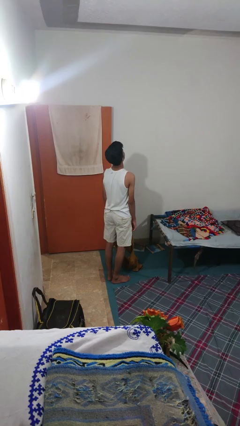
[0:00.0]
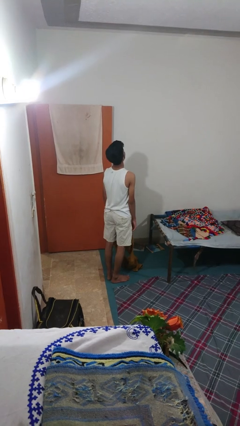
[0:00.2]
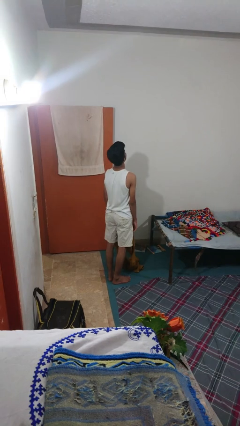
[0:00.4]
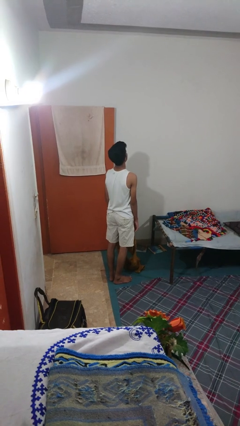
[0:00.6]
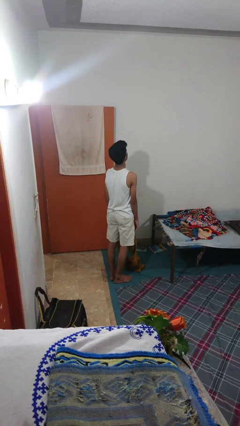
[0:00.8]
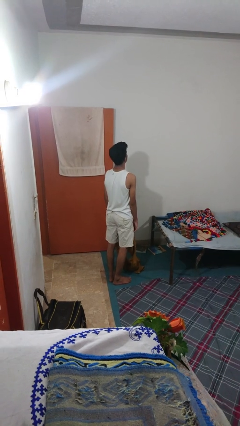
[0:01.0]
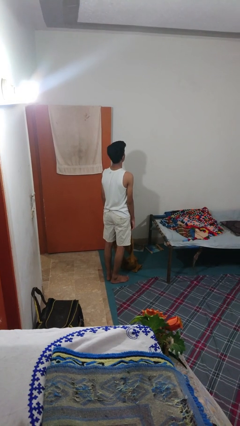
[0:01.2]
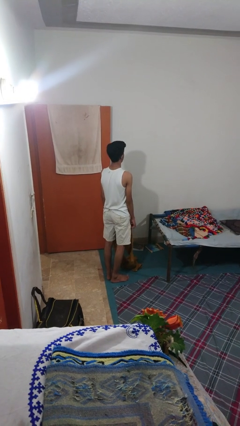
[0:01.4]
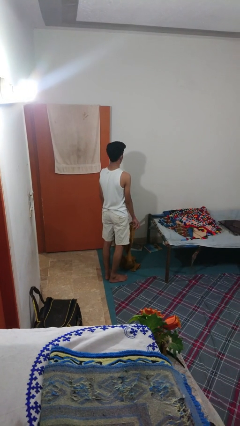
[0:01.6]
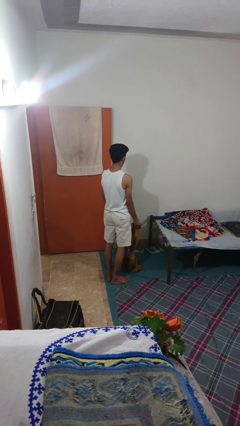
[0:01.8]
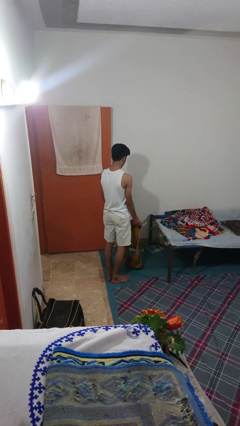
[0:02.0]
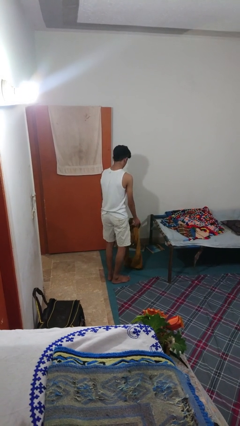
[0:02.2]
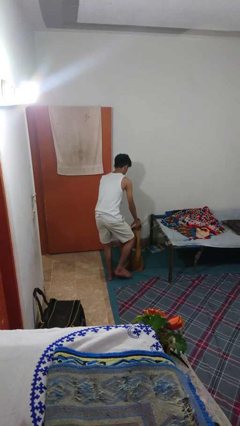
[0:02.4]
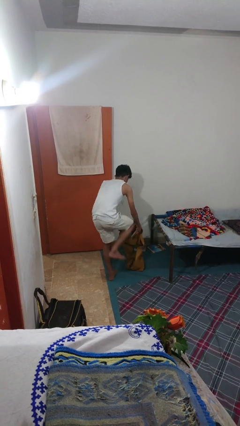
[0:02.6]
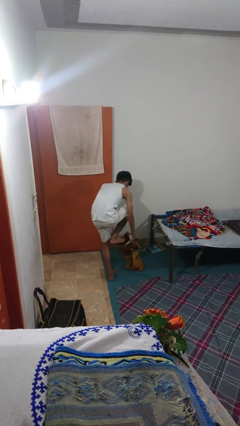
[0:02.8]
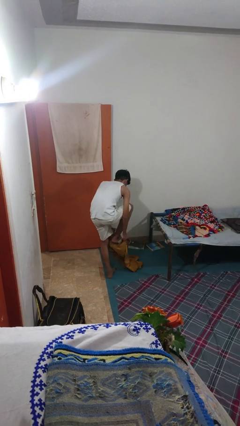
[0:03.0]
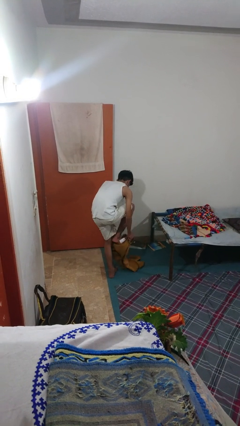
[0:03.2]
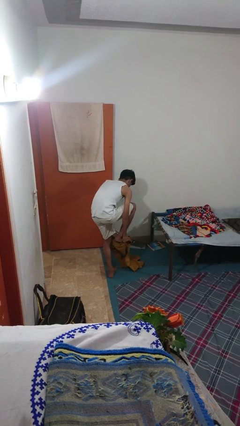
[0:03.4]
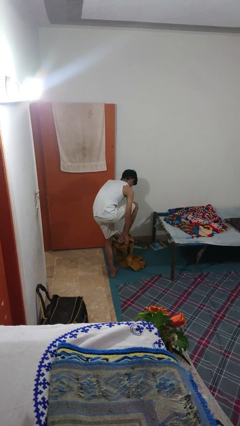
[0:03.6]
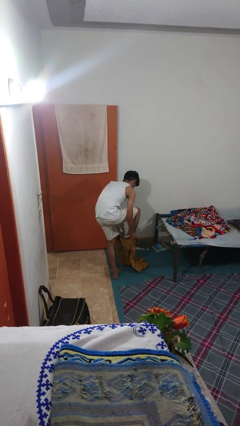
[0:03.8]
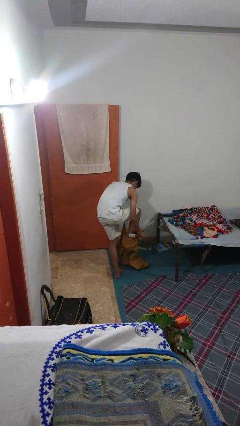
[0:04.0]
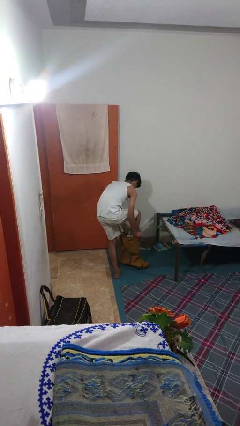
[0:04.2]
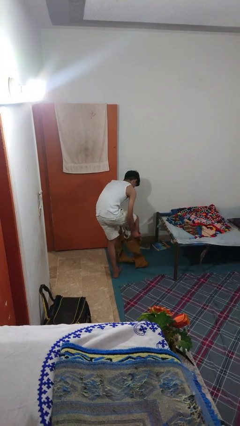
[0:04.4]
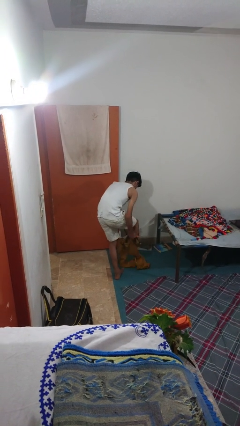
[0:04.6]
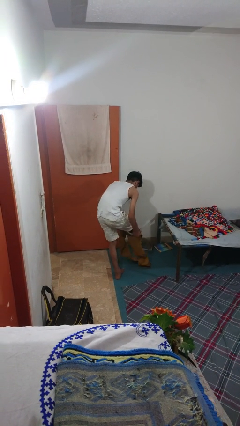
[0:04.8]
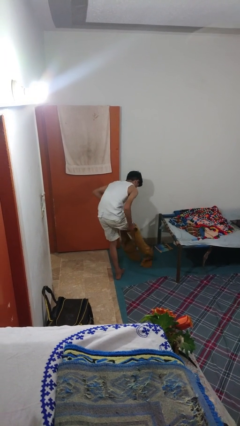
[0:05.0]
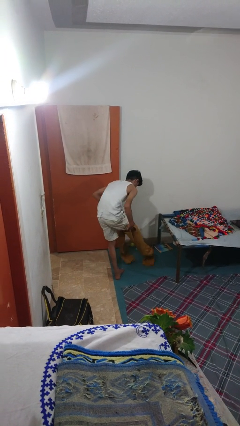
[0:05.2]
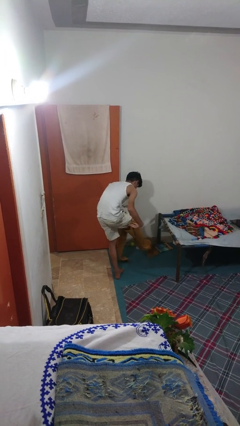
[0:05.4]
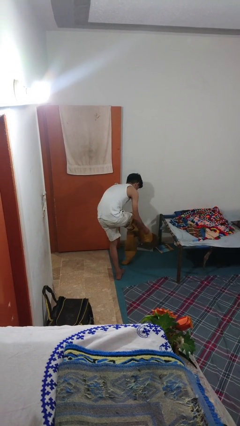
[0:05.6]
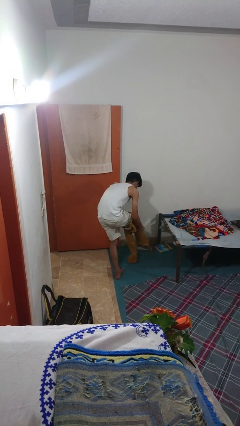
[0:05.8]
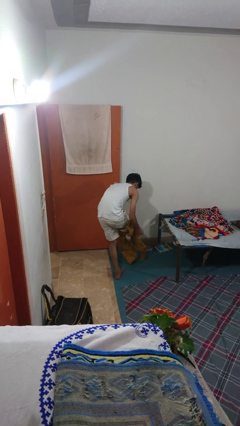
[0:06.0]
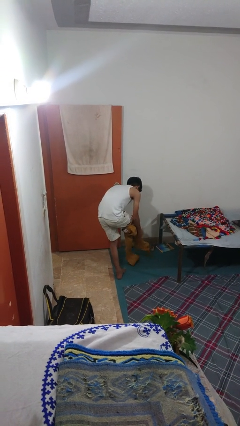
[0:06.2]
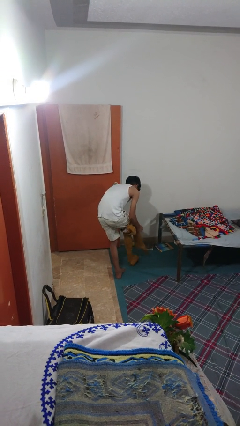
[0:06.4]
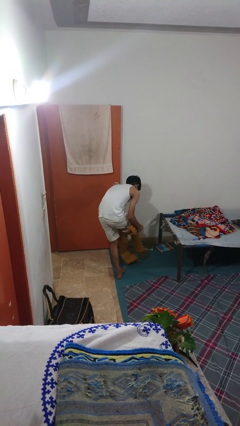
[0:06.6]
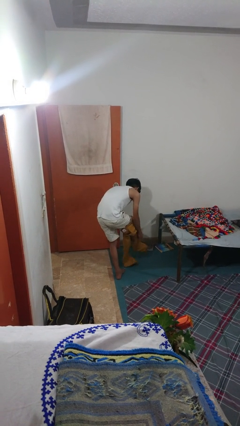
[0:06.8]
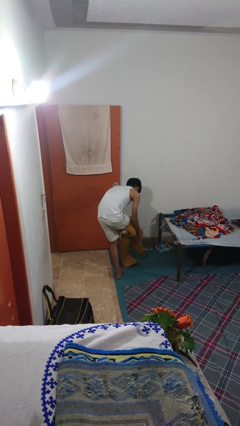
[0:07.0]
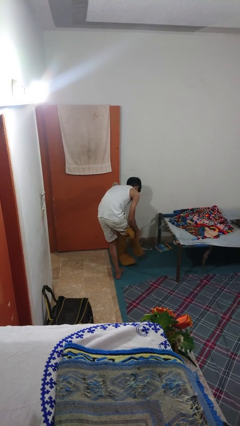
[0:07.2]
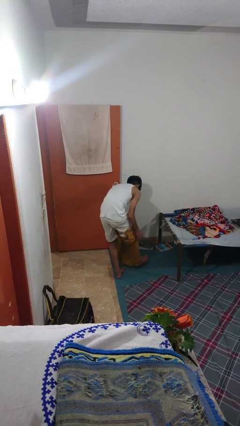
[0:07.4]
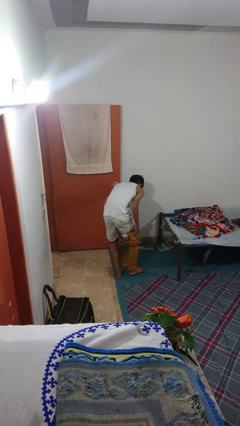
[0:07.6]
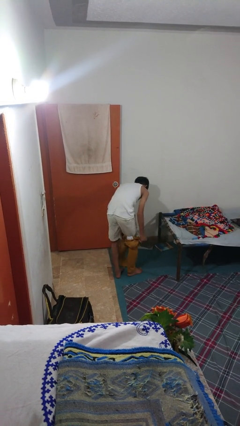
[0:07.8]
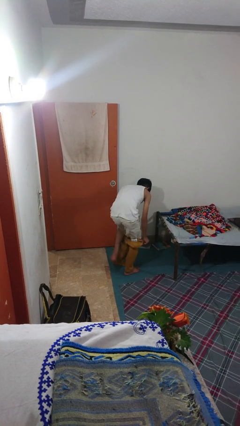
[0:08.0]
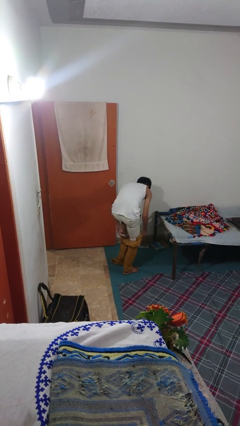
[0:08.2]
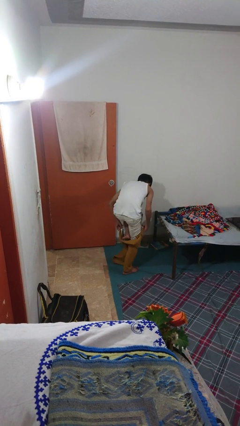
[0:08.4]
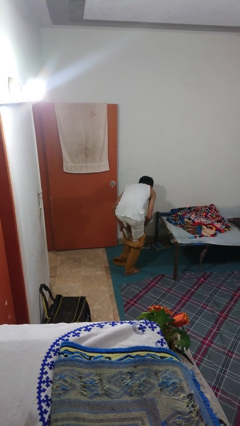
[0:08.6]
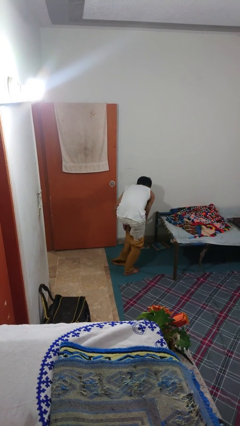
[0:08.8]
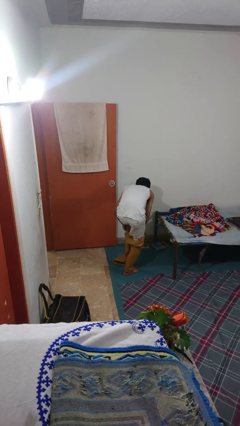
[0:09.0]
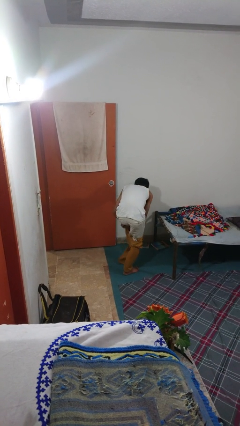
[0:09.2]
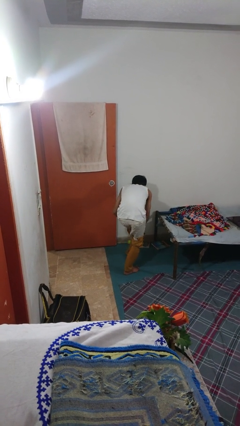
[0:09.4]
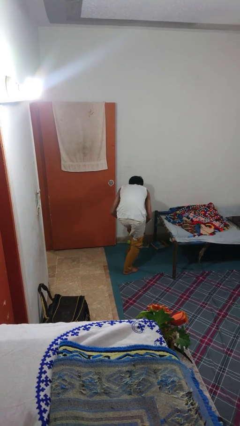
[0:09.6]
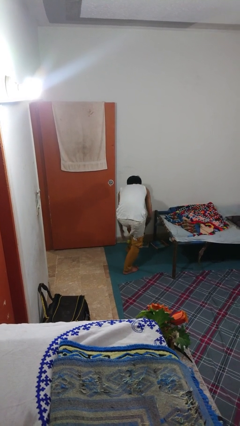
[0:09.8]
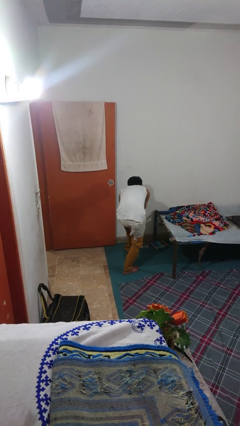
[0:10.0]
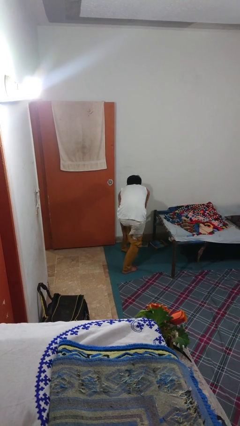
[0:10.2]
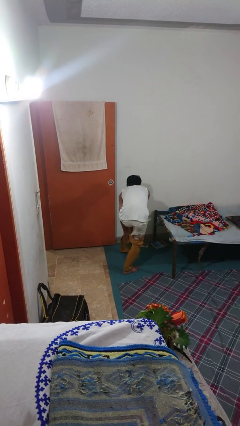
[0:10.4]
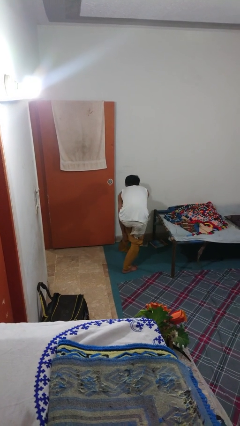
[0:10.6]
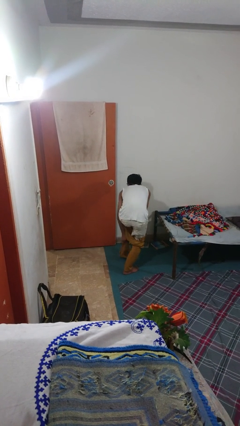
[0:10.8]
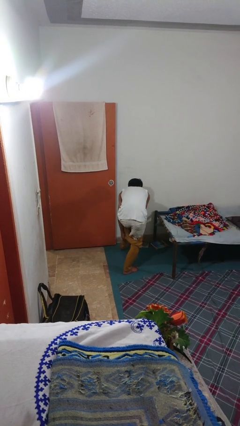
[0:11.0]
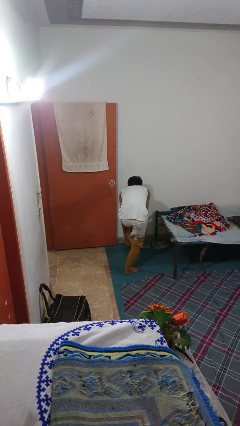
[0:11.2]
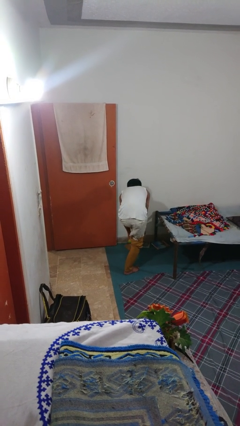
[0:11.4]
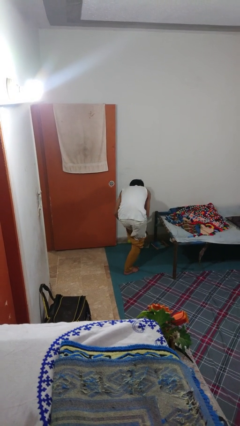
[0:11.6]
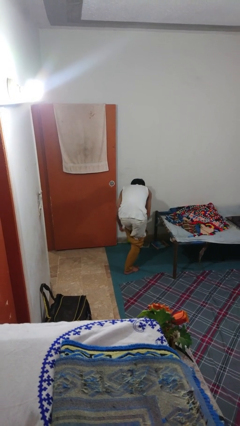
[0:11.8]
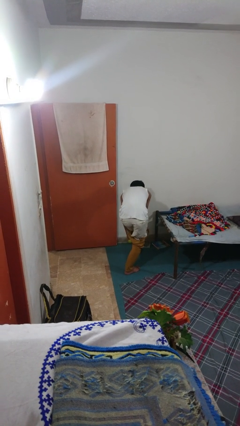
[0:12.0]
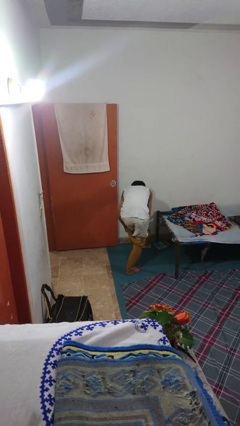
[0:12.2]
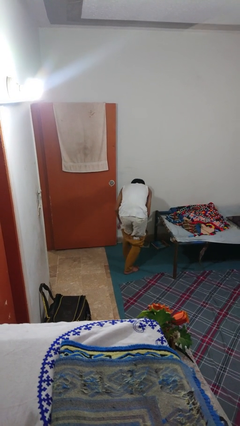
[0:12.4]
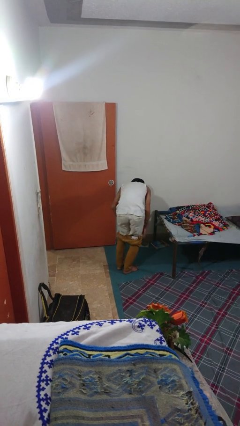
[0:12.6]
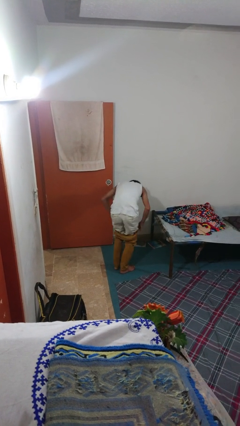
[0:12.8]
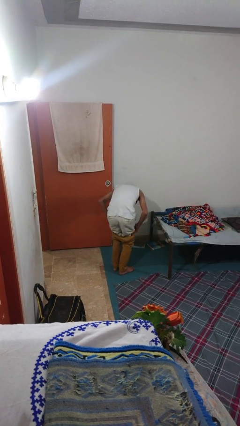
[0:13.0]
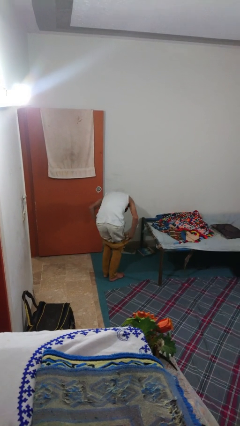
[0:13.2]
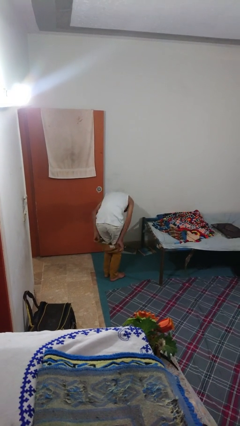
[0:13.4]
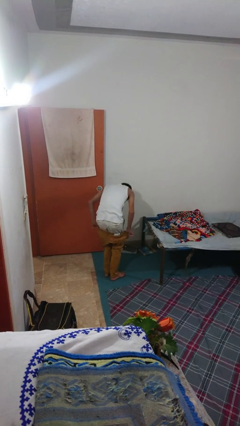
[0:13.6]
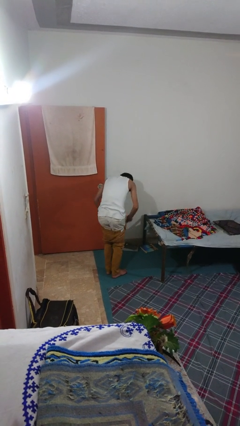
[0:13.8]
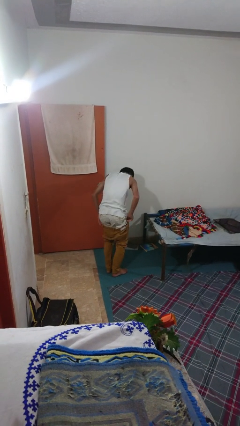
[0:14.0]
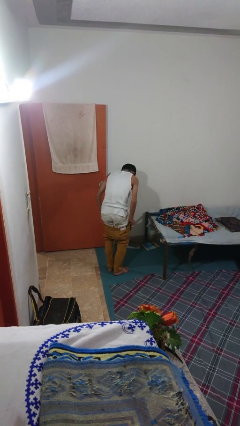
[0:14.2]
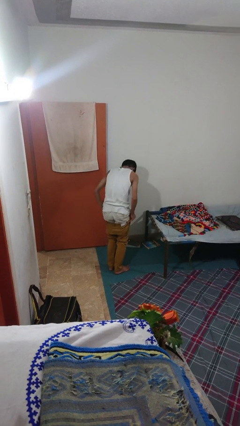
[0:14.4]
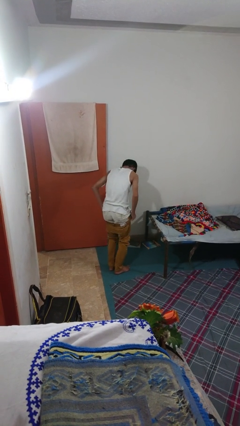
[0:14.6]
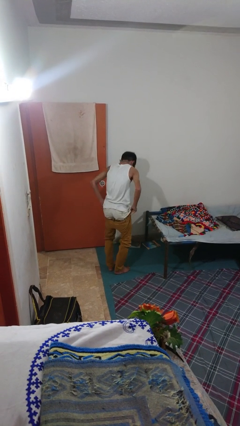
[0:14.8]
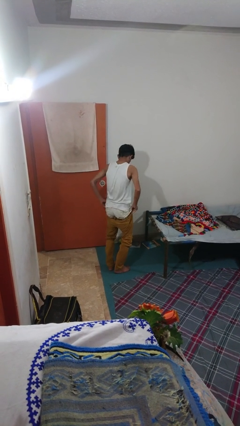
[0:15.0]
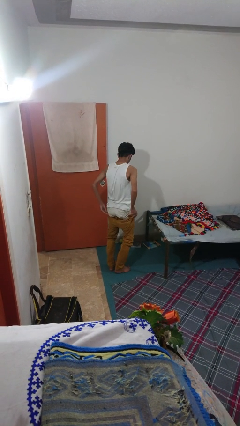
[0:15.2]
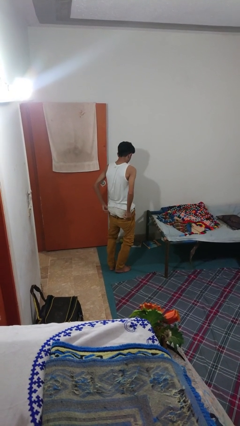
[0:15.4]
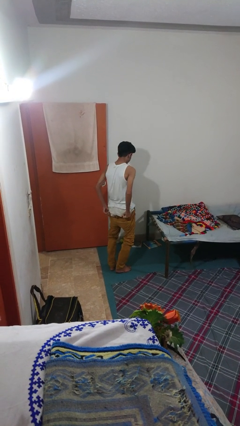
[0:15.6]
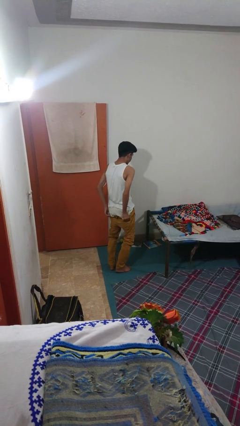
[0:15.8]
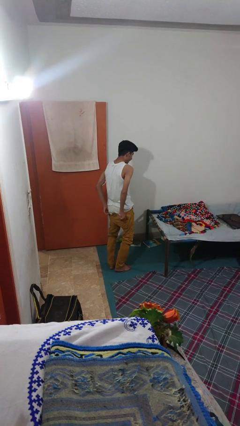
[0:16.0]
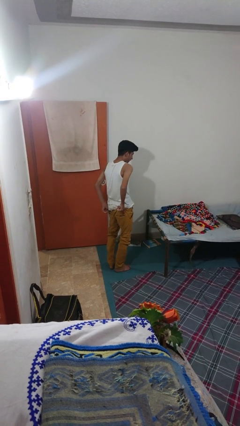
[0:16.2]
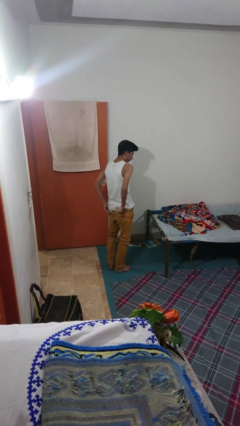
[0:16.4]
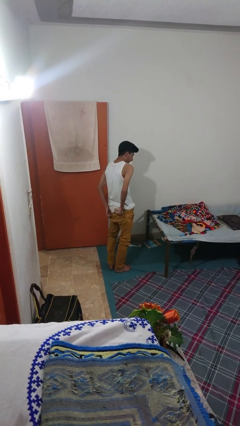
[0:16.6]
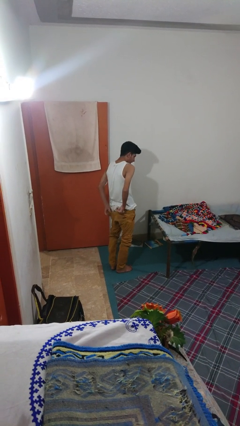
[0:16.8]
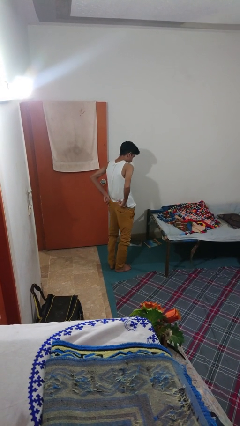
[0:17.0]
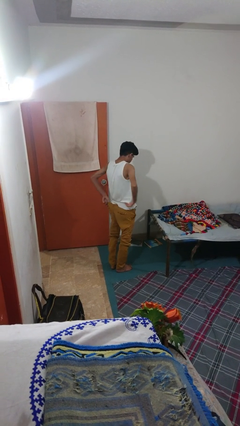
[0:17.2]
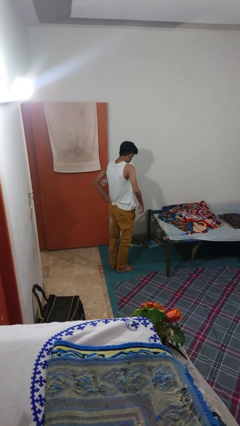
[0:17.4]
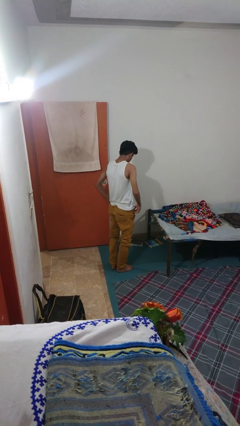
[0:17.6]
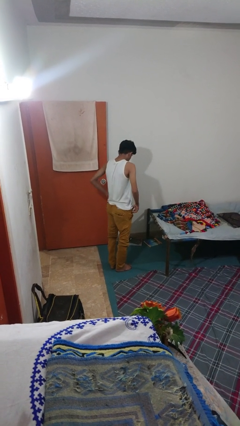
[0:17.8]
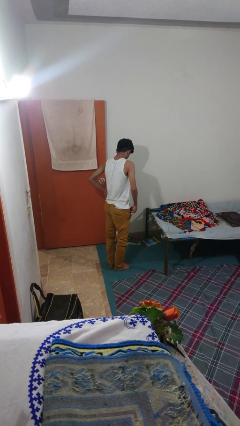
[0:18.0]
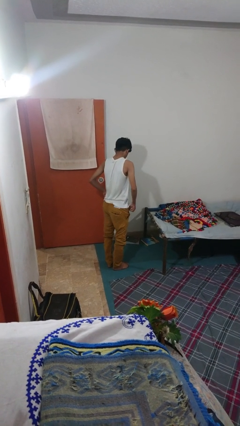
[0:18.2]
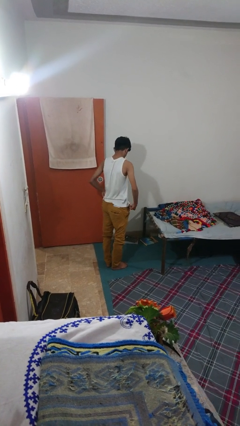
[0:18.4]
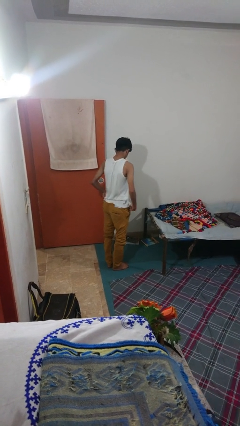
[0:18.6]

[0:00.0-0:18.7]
person puts on pants

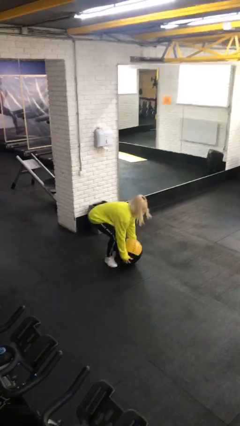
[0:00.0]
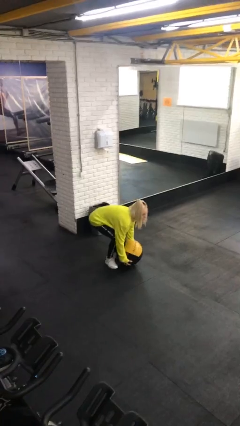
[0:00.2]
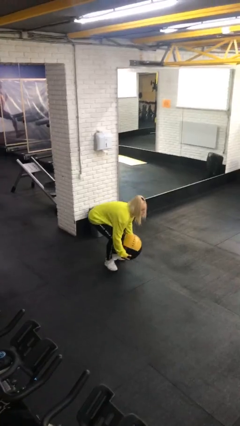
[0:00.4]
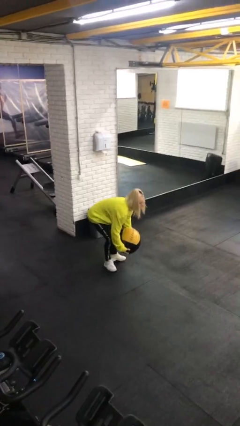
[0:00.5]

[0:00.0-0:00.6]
person picks up object from floor
